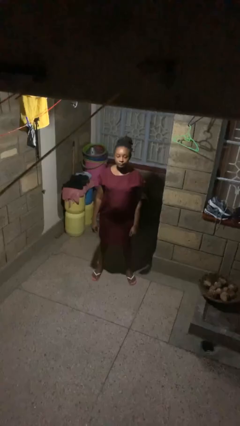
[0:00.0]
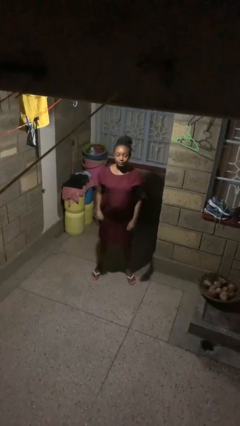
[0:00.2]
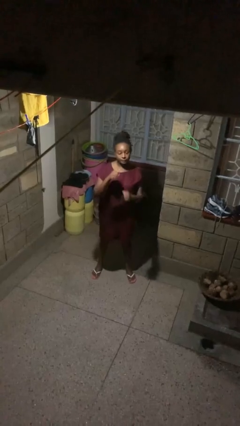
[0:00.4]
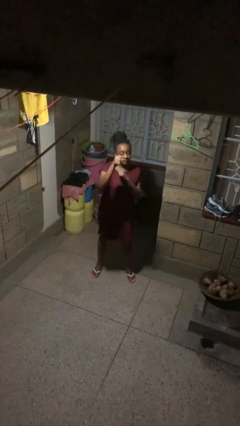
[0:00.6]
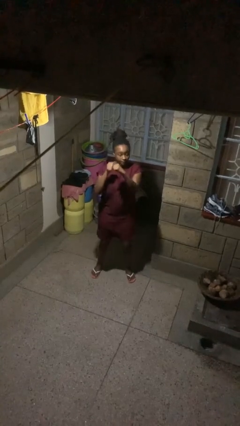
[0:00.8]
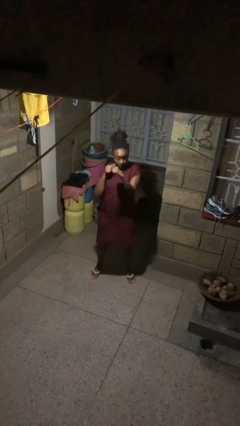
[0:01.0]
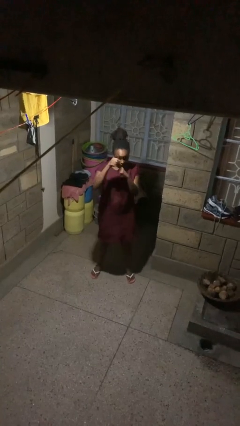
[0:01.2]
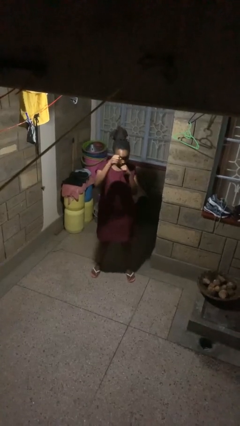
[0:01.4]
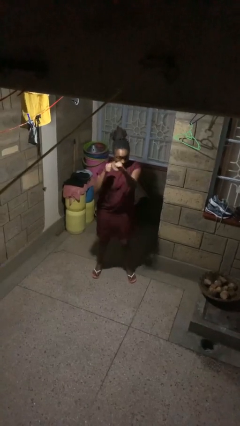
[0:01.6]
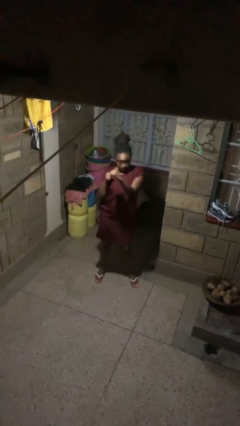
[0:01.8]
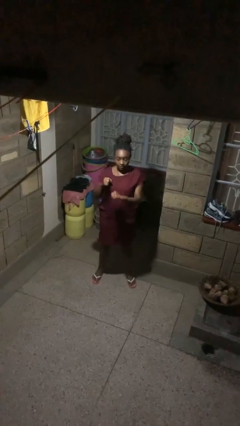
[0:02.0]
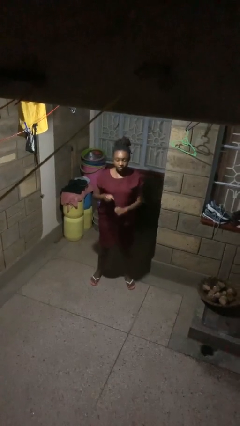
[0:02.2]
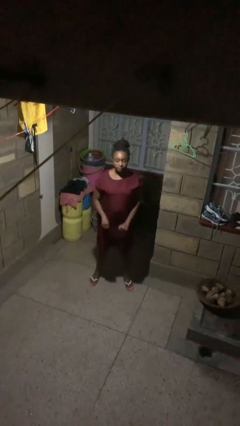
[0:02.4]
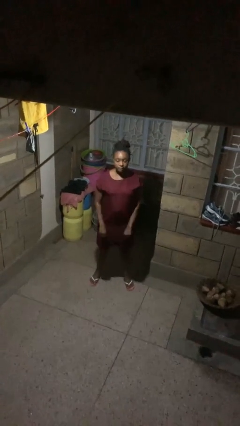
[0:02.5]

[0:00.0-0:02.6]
person punches

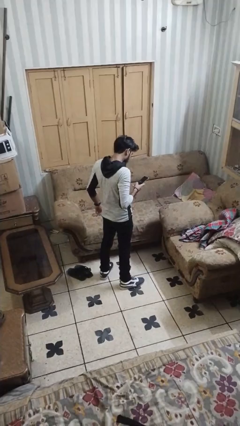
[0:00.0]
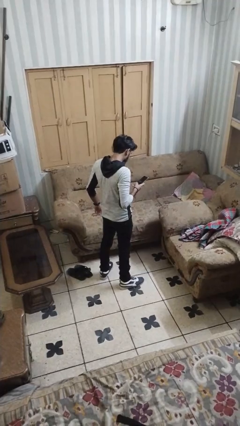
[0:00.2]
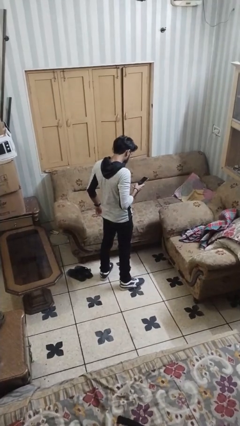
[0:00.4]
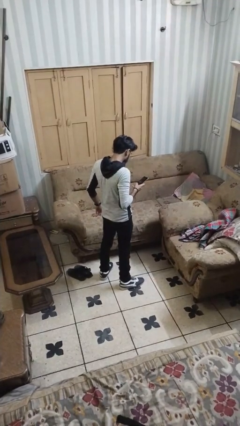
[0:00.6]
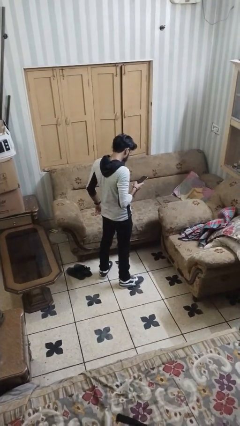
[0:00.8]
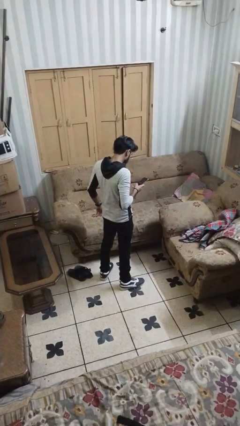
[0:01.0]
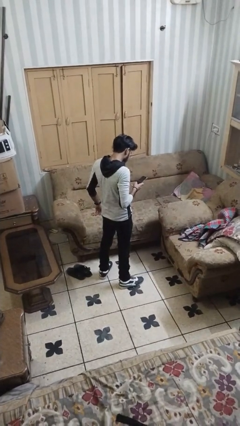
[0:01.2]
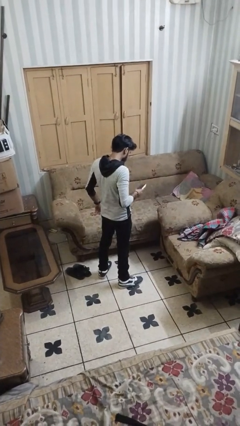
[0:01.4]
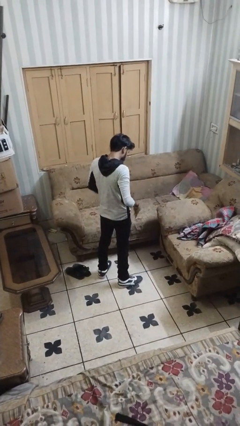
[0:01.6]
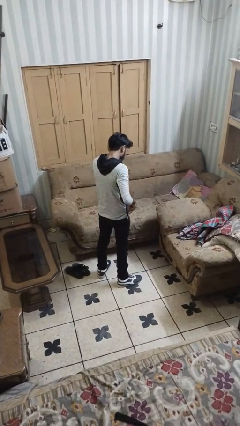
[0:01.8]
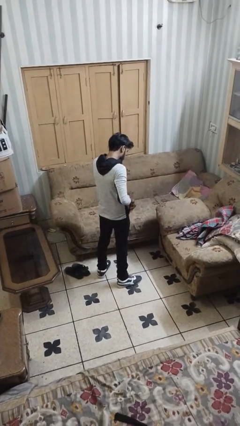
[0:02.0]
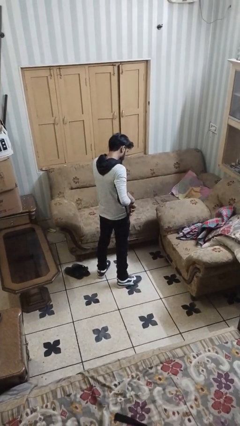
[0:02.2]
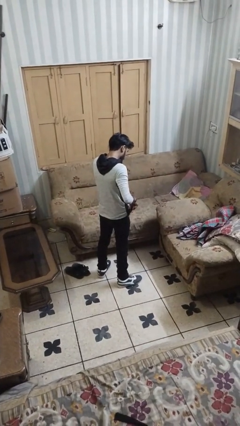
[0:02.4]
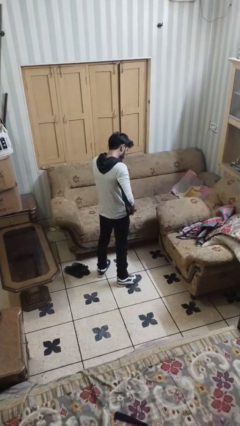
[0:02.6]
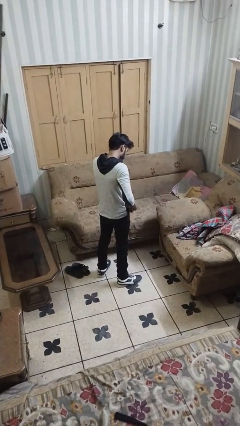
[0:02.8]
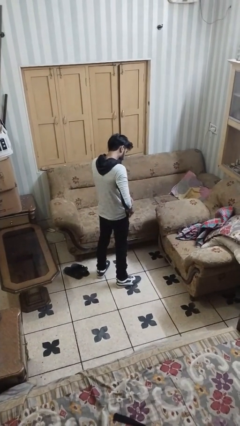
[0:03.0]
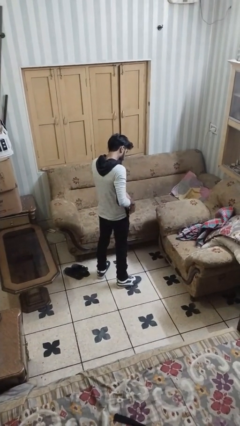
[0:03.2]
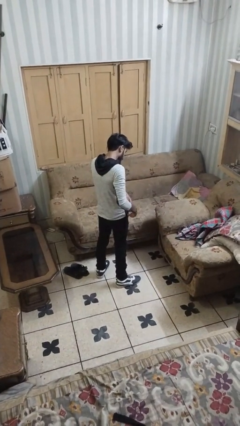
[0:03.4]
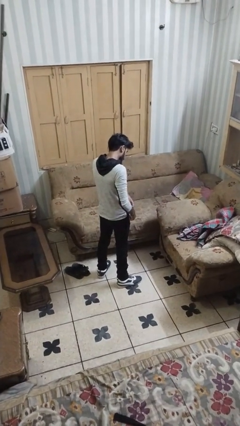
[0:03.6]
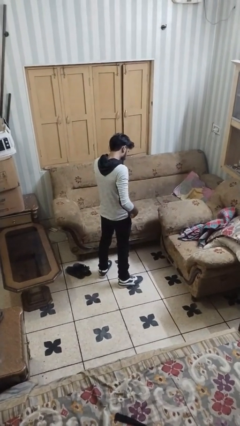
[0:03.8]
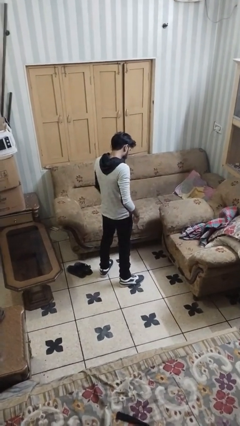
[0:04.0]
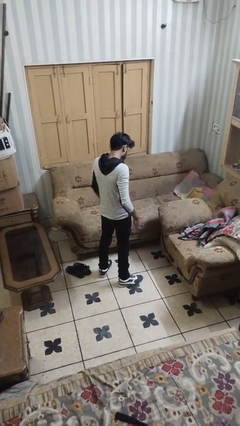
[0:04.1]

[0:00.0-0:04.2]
person puts phone into pocket

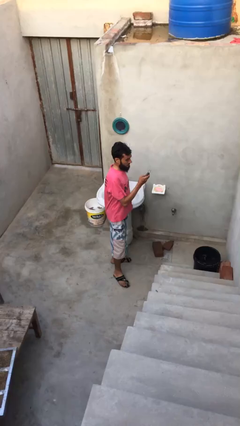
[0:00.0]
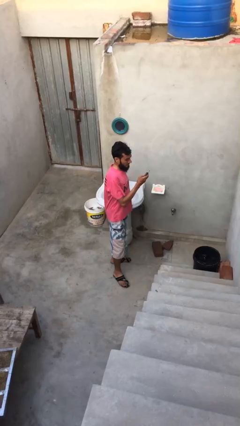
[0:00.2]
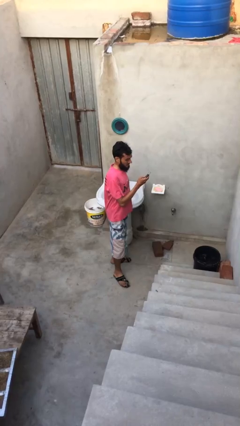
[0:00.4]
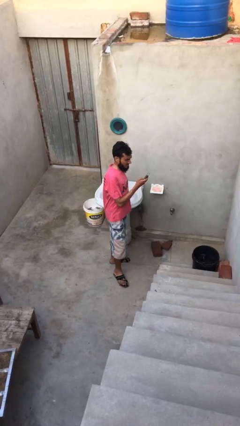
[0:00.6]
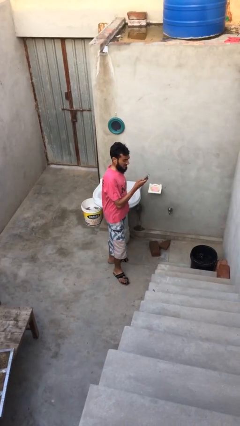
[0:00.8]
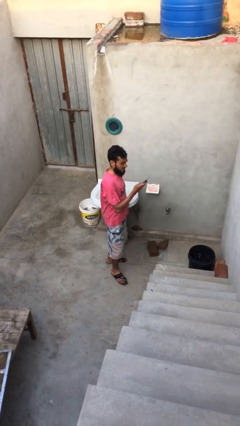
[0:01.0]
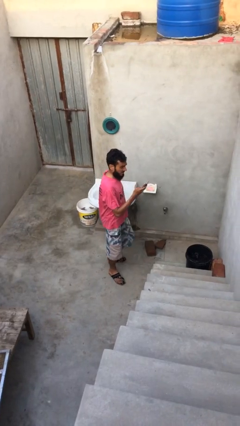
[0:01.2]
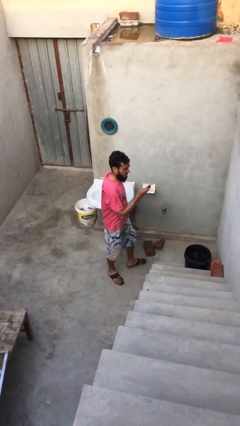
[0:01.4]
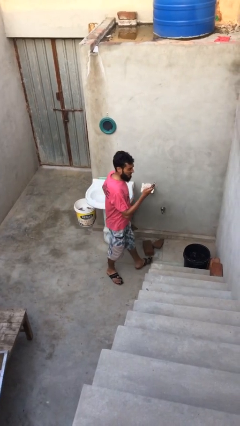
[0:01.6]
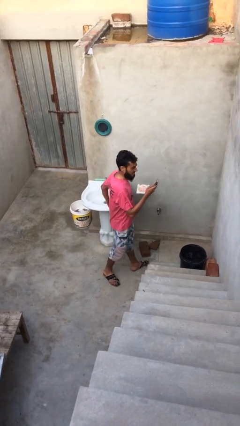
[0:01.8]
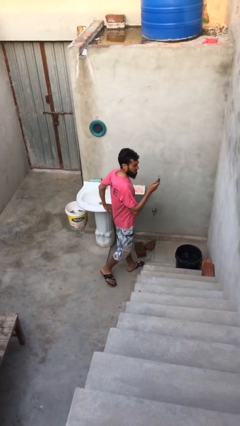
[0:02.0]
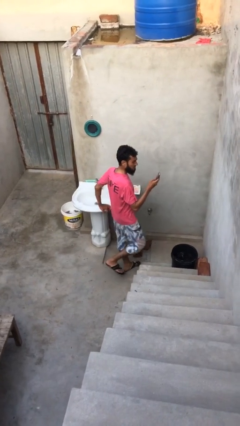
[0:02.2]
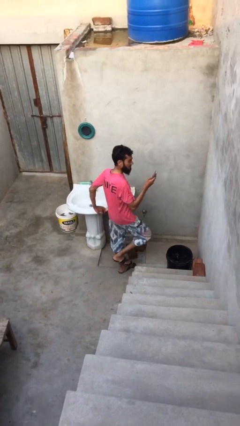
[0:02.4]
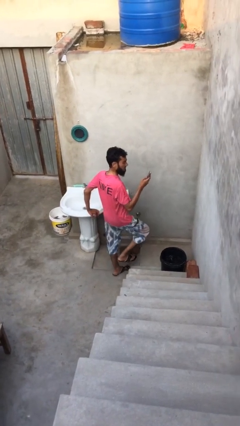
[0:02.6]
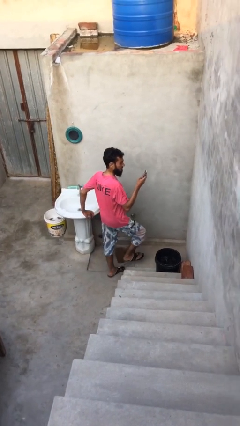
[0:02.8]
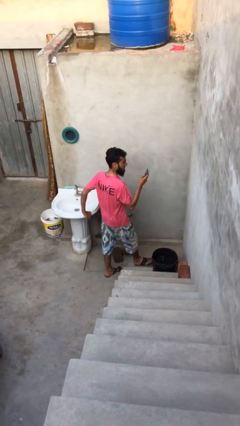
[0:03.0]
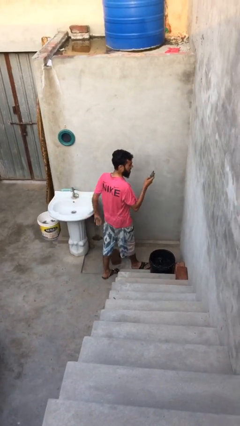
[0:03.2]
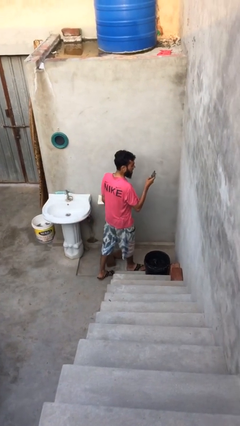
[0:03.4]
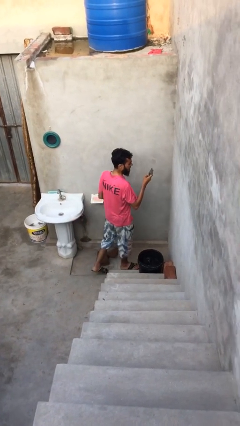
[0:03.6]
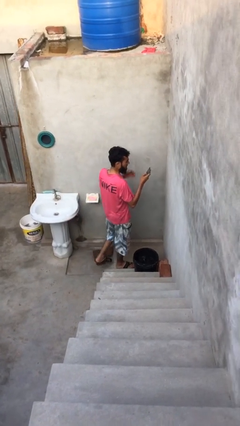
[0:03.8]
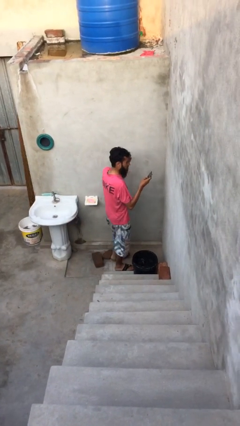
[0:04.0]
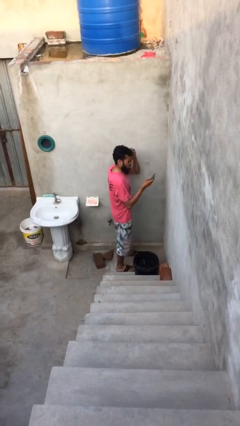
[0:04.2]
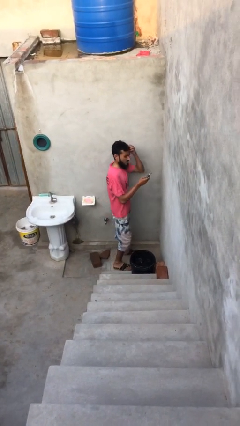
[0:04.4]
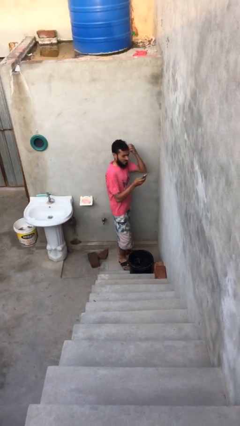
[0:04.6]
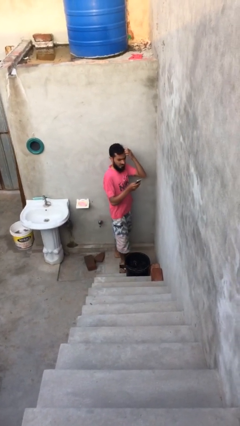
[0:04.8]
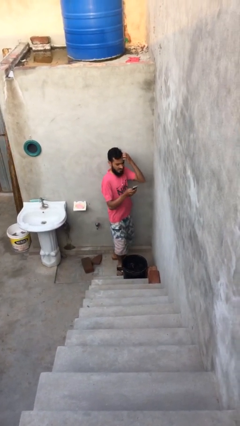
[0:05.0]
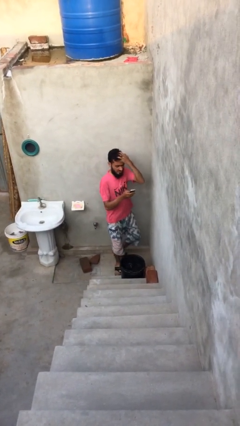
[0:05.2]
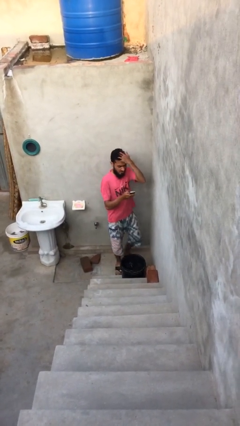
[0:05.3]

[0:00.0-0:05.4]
person texts on phone

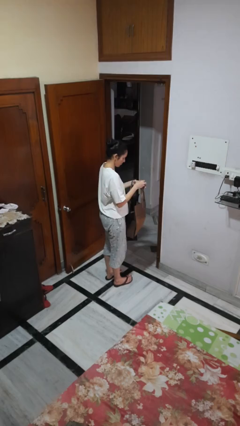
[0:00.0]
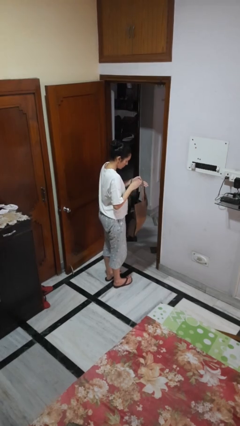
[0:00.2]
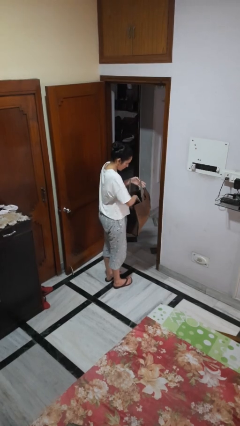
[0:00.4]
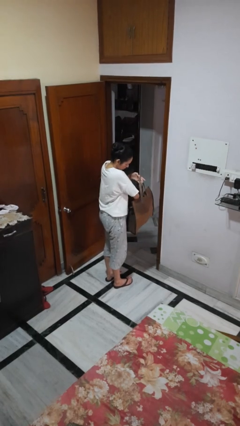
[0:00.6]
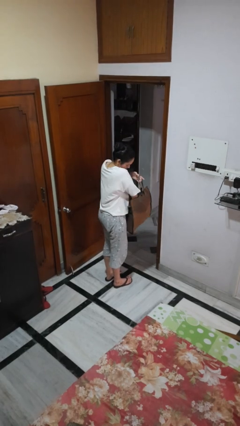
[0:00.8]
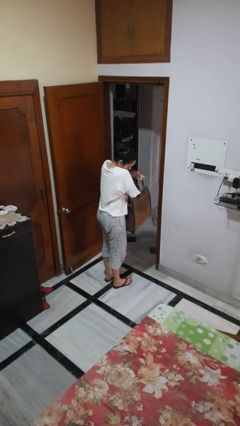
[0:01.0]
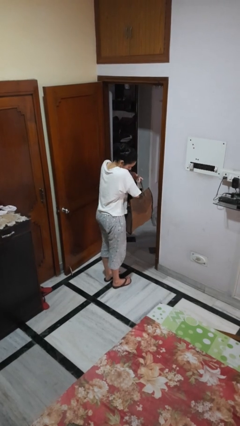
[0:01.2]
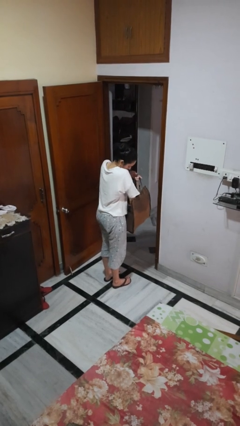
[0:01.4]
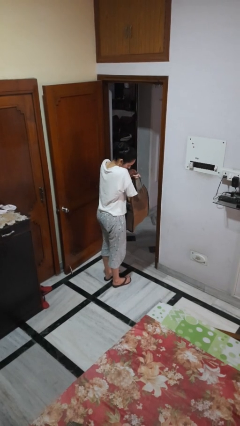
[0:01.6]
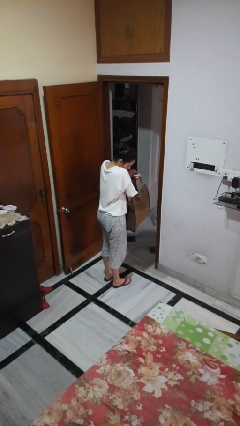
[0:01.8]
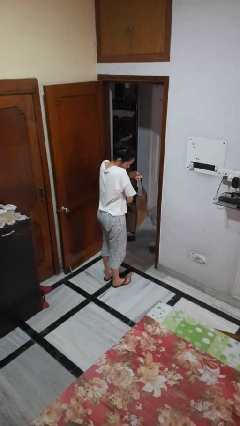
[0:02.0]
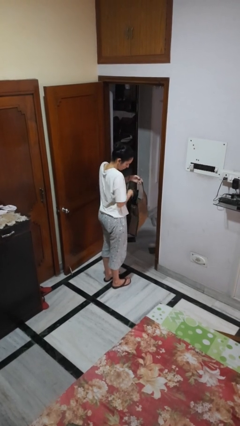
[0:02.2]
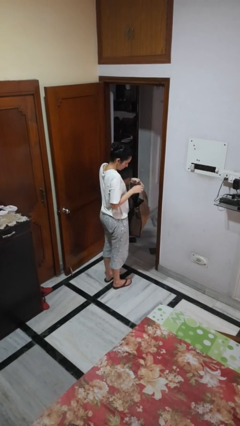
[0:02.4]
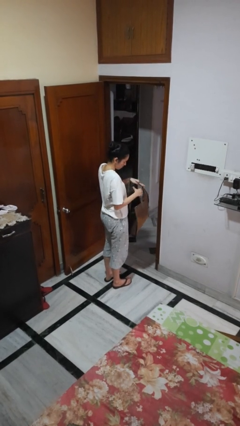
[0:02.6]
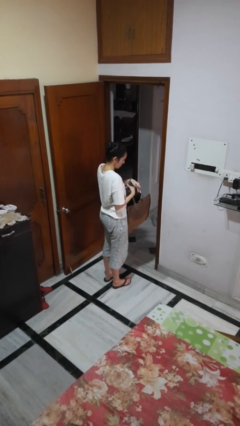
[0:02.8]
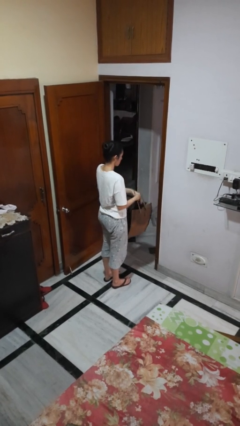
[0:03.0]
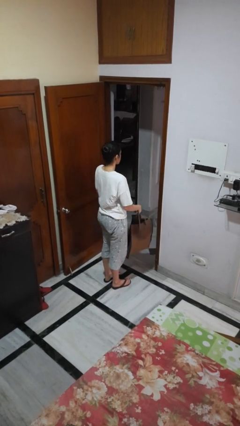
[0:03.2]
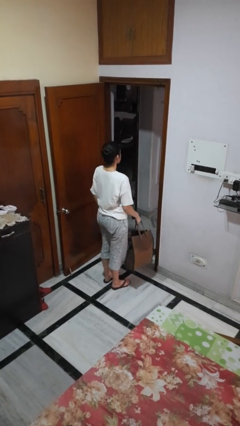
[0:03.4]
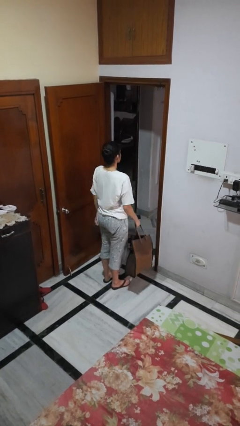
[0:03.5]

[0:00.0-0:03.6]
person searches in bag

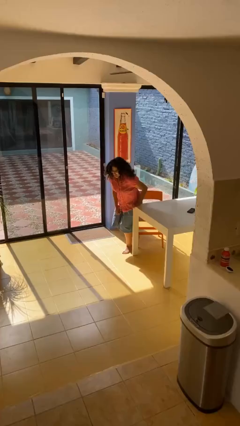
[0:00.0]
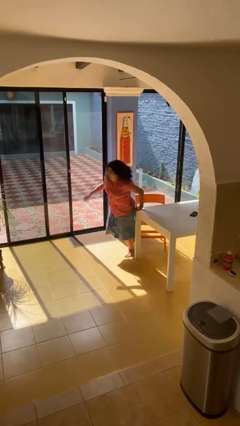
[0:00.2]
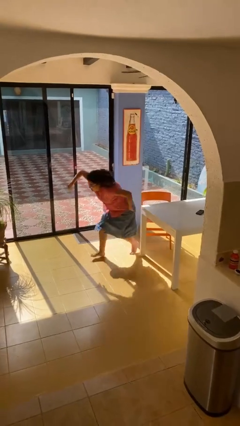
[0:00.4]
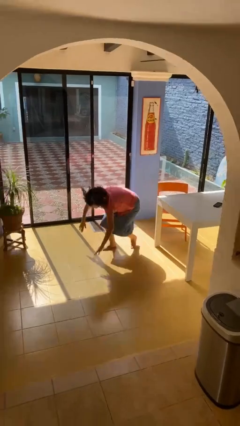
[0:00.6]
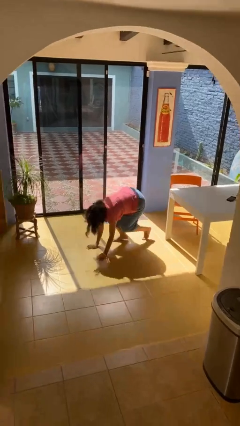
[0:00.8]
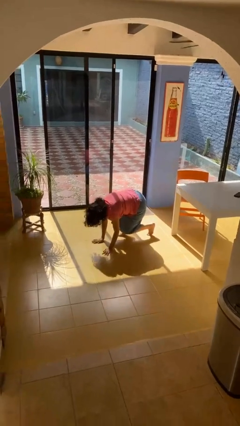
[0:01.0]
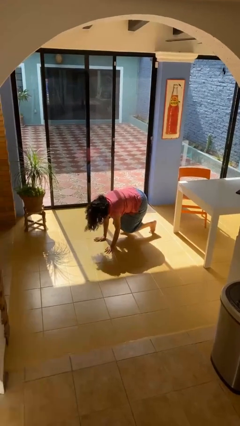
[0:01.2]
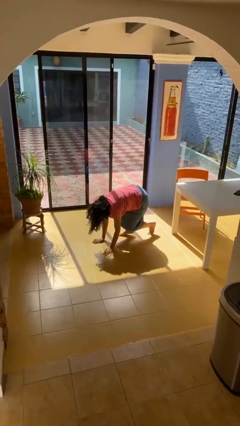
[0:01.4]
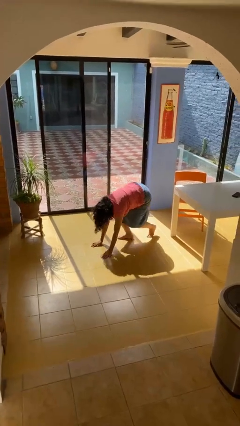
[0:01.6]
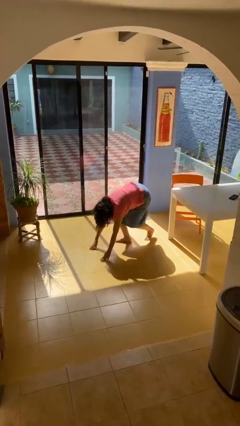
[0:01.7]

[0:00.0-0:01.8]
person falls from chair

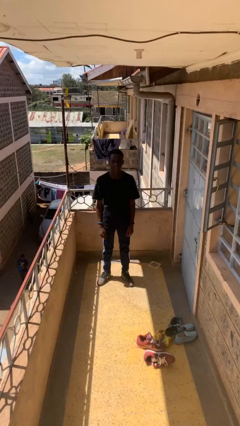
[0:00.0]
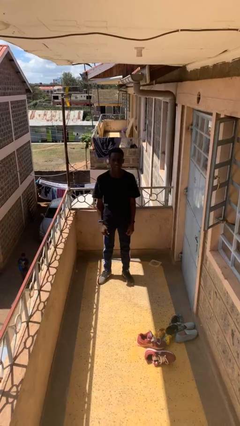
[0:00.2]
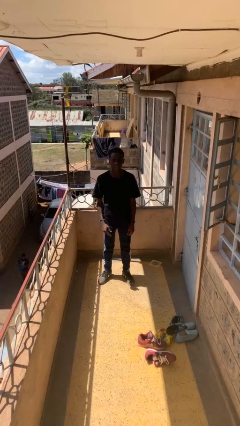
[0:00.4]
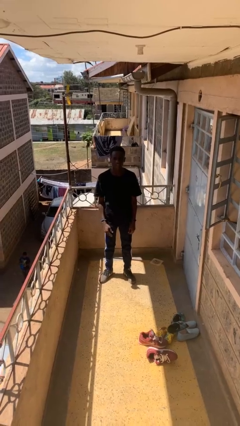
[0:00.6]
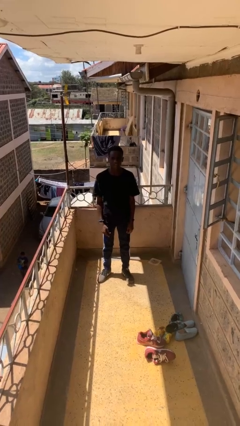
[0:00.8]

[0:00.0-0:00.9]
person strokes hair
